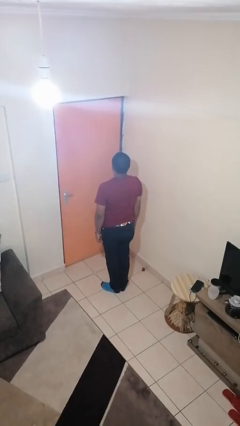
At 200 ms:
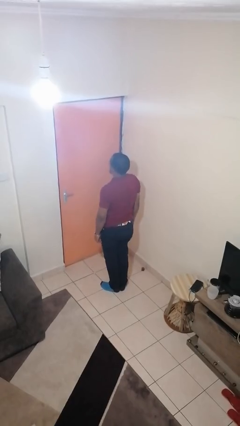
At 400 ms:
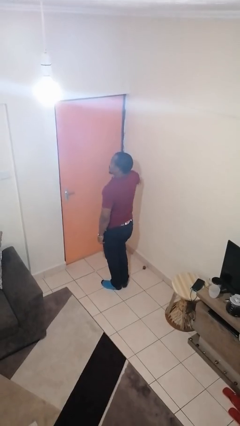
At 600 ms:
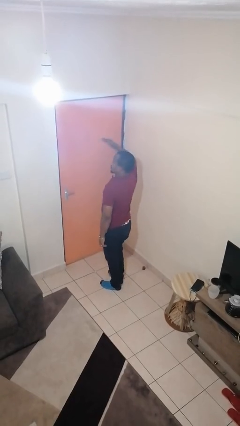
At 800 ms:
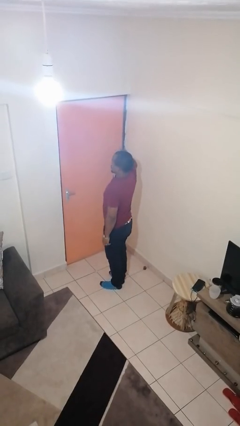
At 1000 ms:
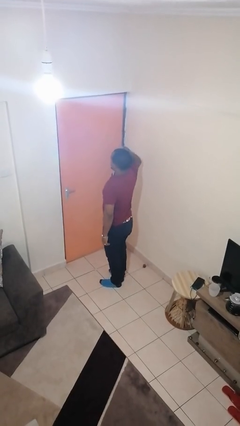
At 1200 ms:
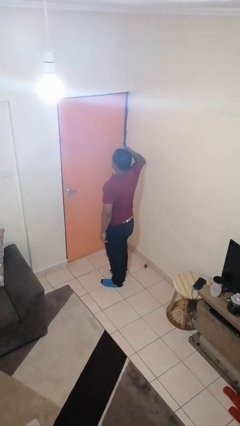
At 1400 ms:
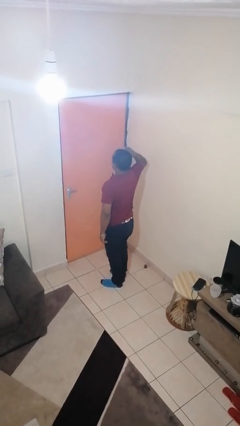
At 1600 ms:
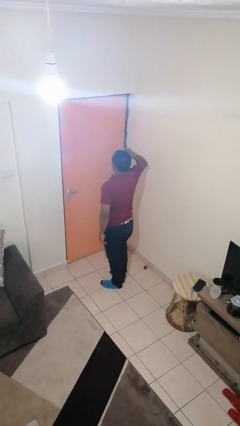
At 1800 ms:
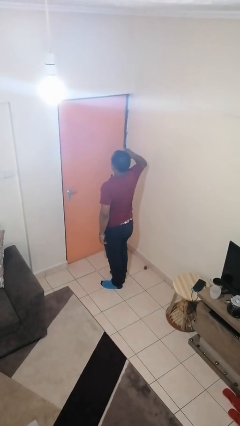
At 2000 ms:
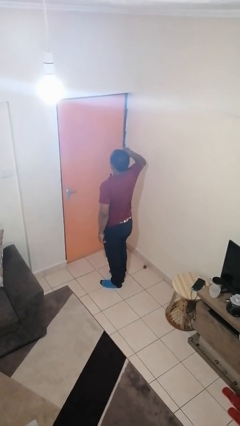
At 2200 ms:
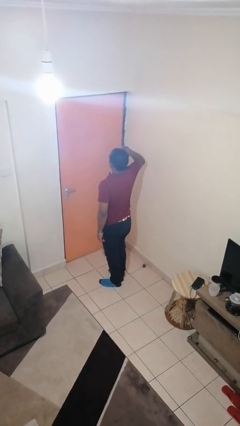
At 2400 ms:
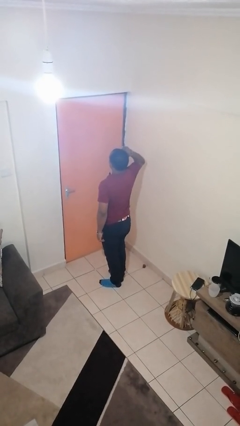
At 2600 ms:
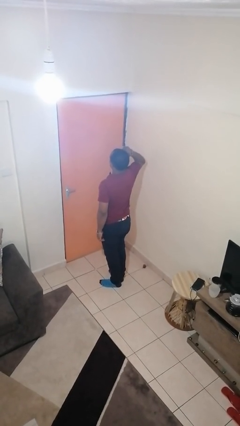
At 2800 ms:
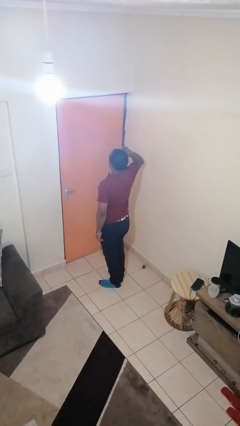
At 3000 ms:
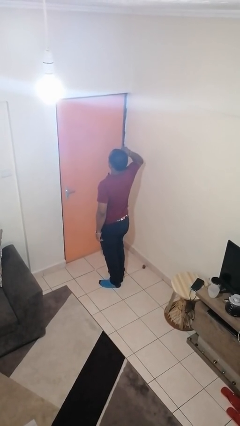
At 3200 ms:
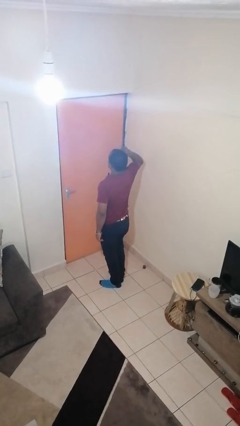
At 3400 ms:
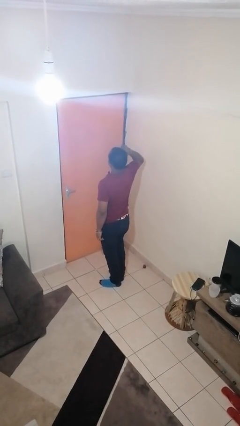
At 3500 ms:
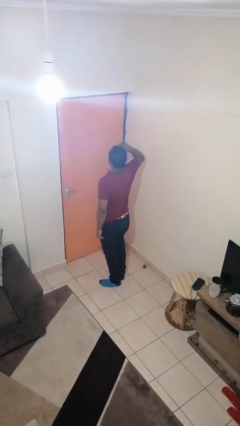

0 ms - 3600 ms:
person salutes

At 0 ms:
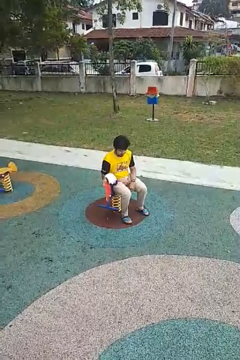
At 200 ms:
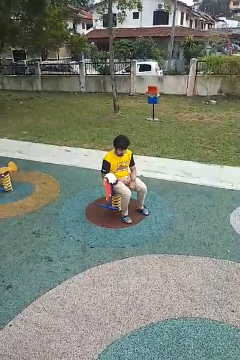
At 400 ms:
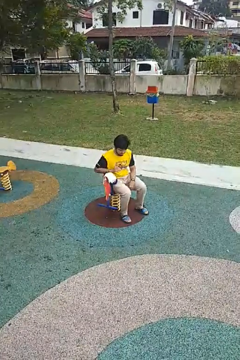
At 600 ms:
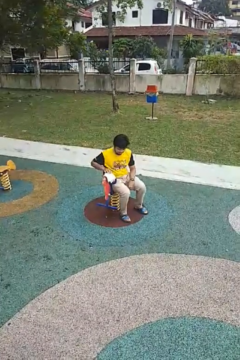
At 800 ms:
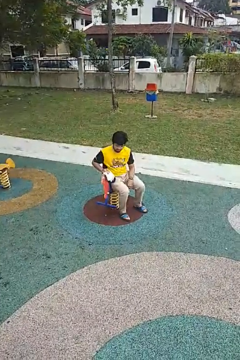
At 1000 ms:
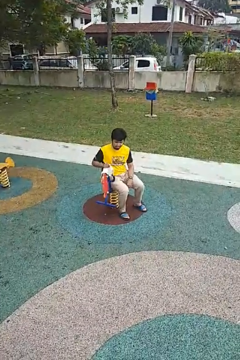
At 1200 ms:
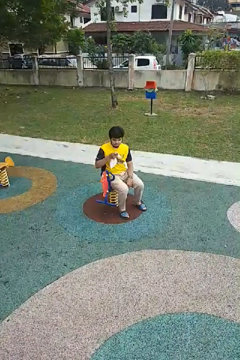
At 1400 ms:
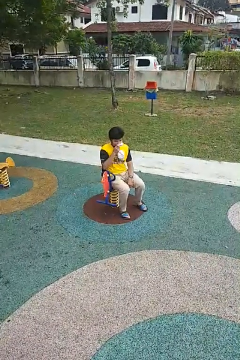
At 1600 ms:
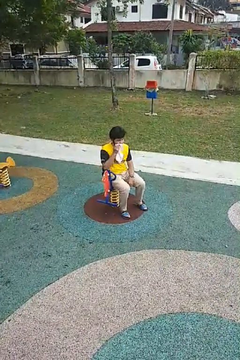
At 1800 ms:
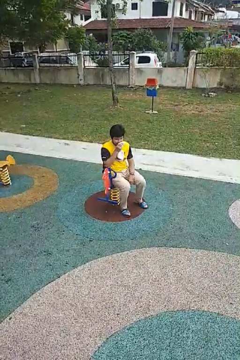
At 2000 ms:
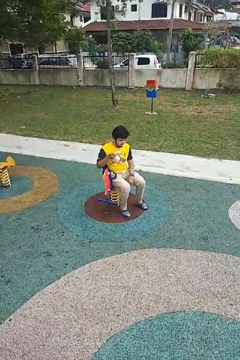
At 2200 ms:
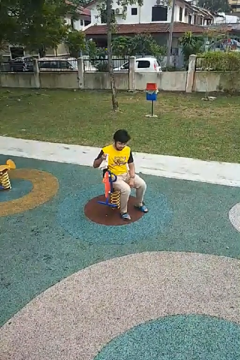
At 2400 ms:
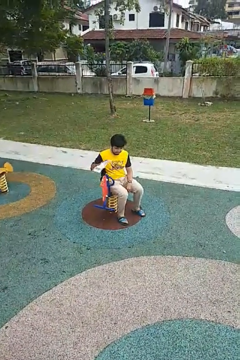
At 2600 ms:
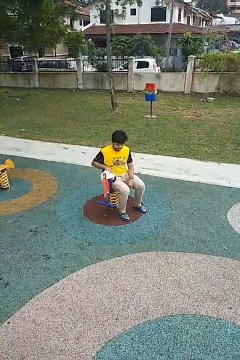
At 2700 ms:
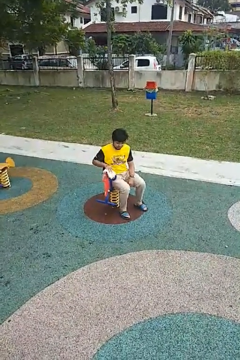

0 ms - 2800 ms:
person wipes mouth with napkin

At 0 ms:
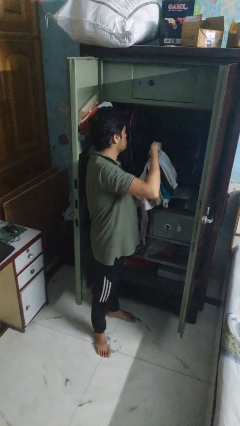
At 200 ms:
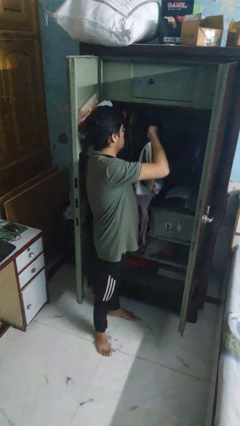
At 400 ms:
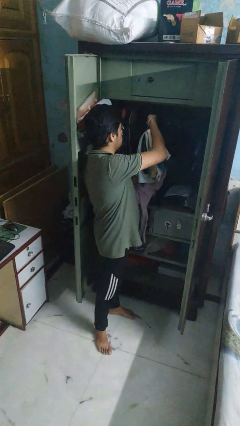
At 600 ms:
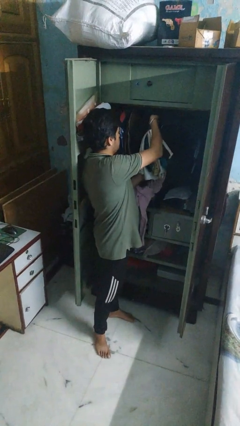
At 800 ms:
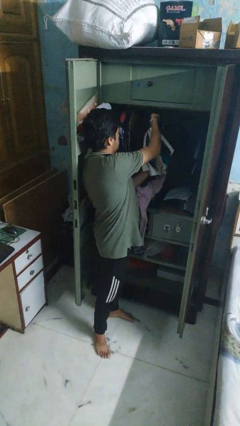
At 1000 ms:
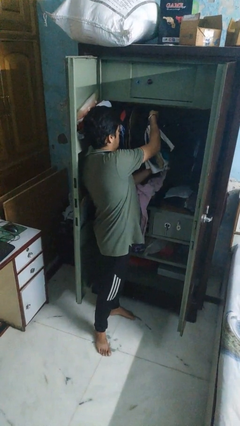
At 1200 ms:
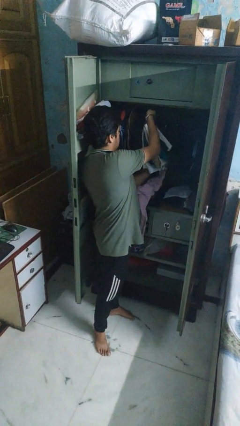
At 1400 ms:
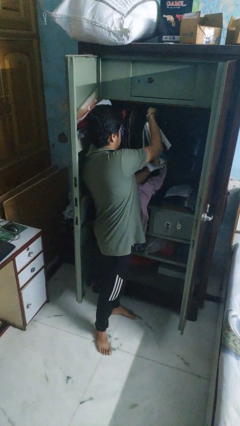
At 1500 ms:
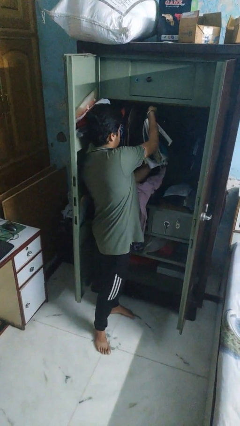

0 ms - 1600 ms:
person puts clothes into closet

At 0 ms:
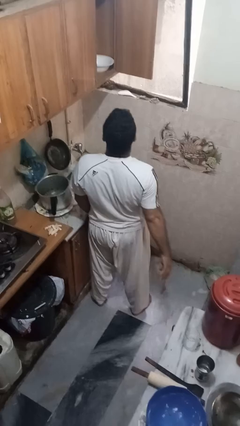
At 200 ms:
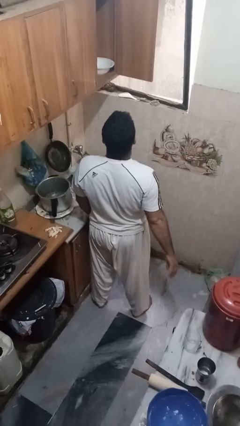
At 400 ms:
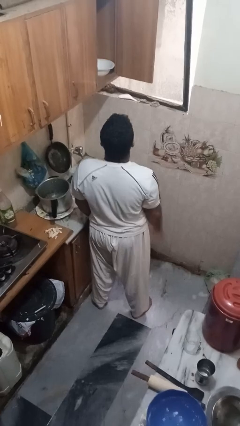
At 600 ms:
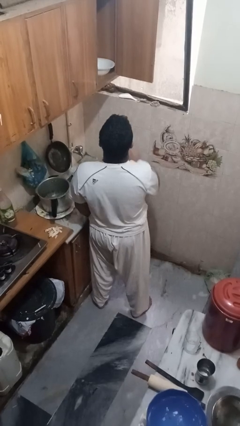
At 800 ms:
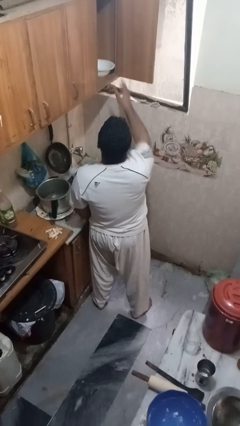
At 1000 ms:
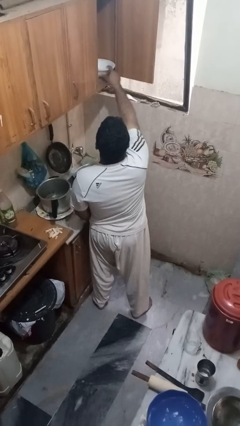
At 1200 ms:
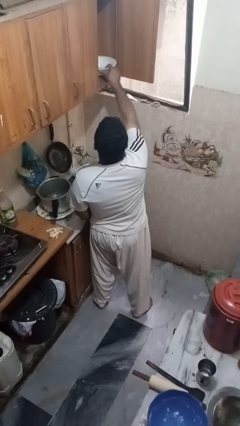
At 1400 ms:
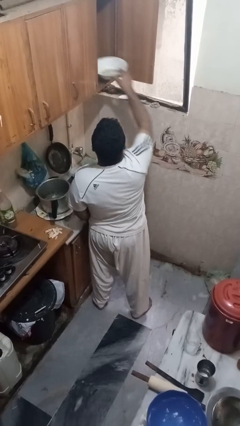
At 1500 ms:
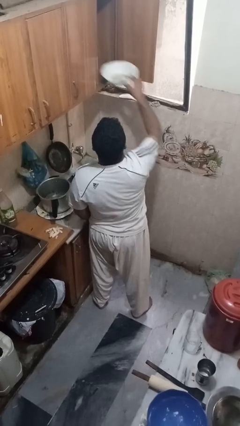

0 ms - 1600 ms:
person takes object from cabinet

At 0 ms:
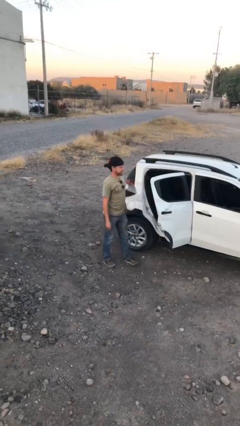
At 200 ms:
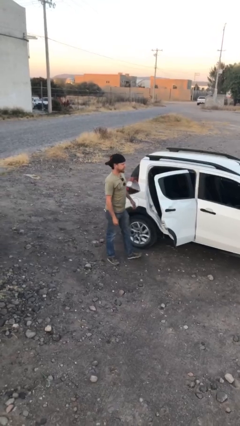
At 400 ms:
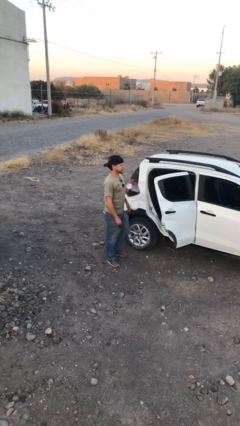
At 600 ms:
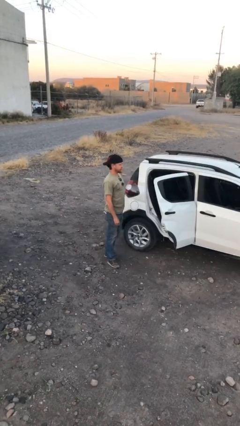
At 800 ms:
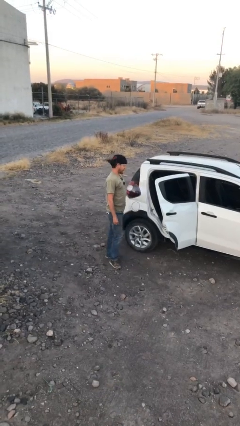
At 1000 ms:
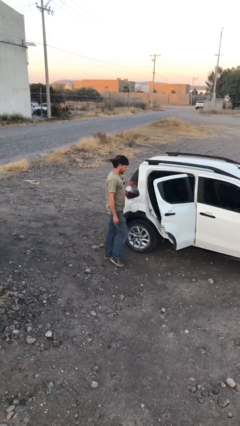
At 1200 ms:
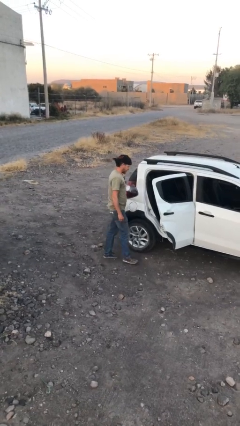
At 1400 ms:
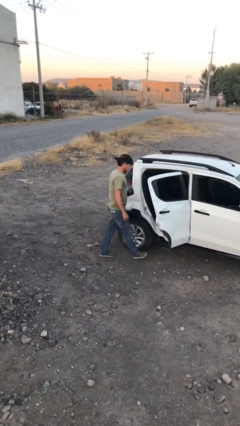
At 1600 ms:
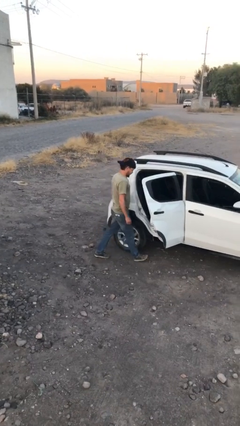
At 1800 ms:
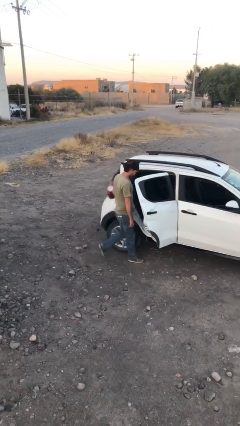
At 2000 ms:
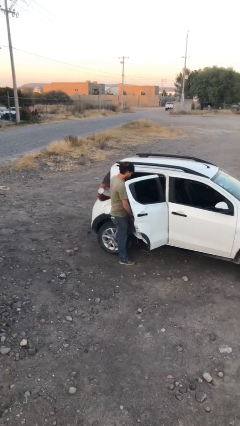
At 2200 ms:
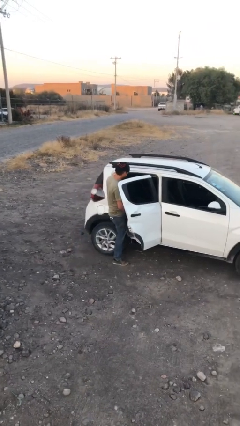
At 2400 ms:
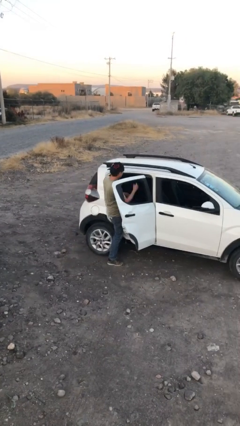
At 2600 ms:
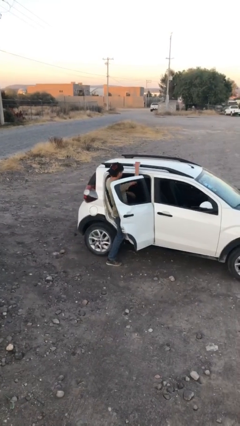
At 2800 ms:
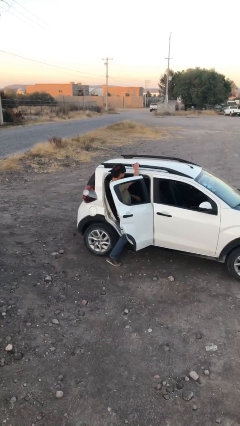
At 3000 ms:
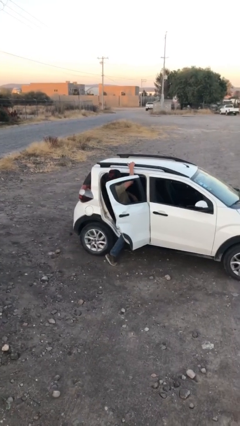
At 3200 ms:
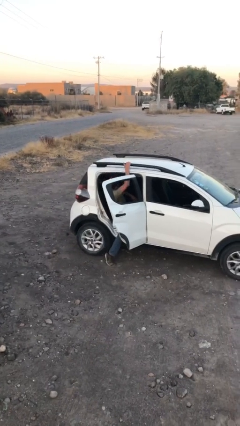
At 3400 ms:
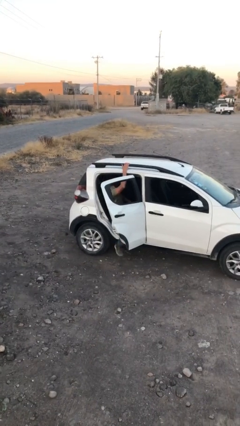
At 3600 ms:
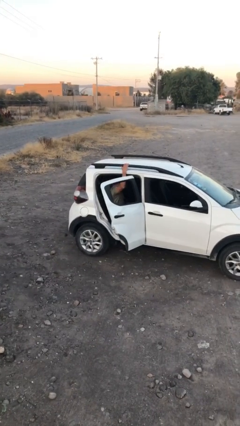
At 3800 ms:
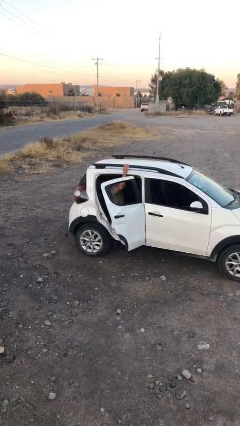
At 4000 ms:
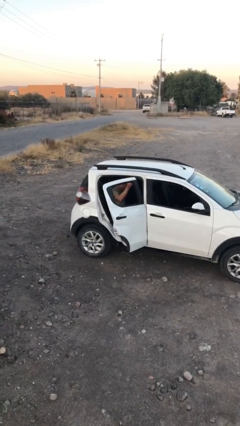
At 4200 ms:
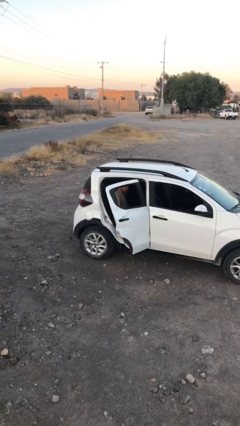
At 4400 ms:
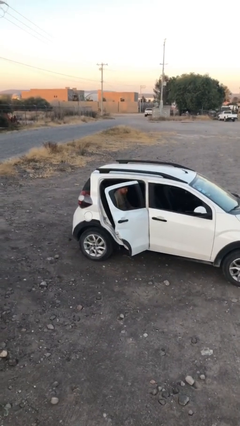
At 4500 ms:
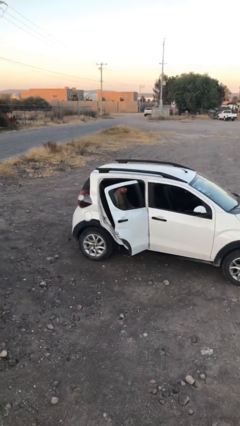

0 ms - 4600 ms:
person enters car

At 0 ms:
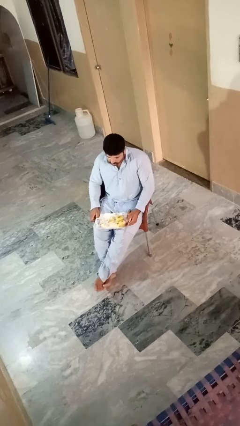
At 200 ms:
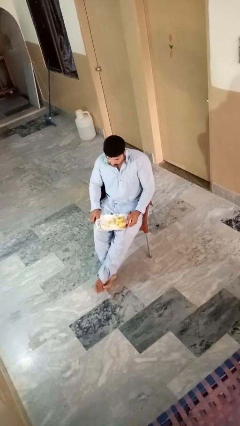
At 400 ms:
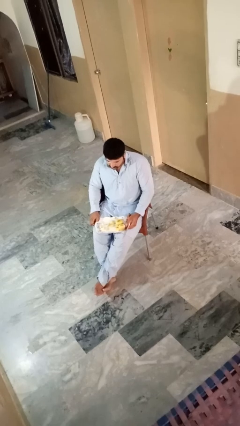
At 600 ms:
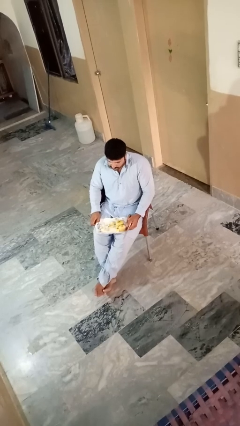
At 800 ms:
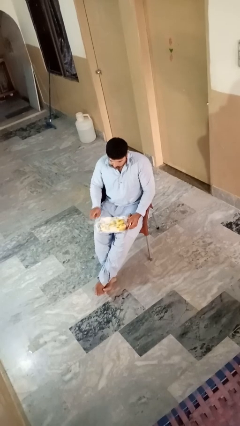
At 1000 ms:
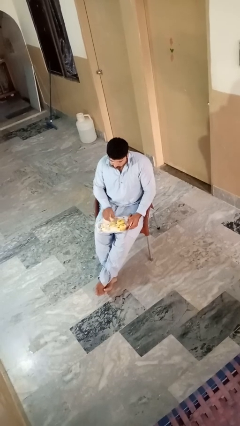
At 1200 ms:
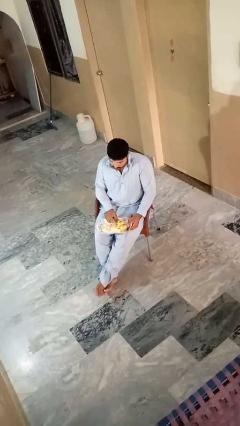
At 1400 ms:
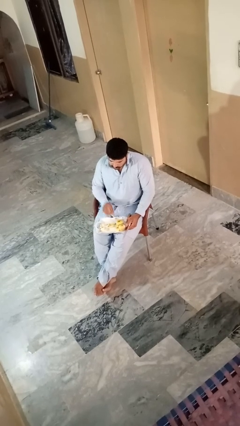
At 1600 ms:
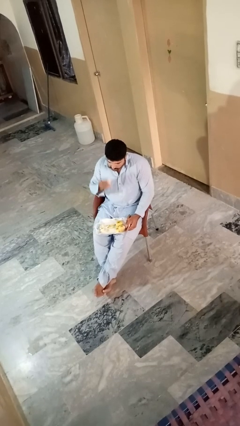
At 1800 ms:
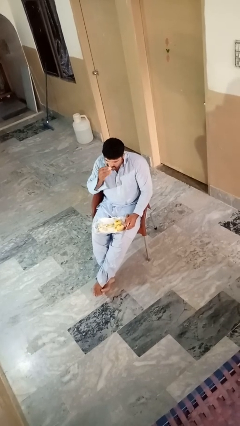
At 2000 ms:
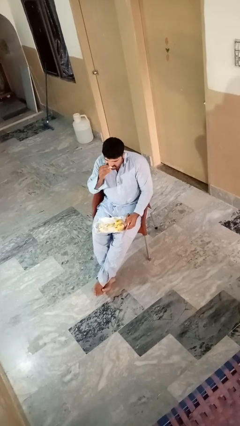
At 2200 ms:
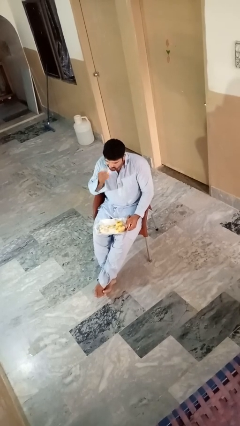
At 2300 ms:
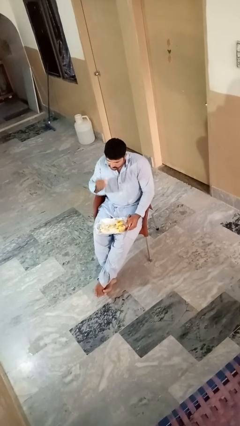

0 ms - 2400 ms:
person eats apple

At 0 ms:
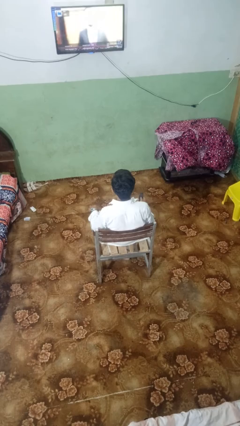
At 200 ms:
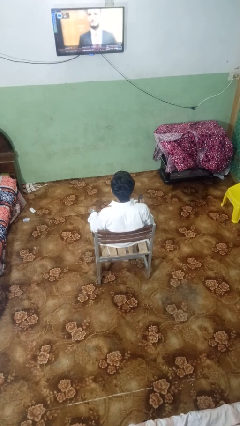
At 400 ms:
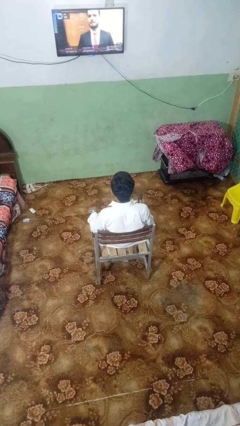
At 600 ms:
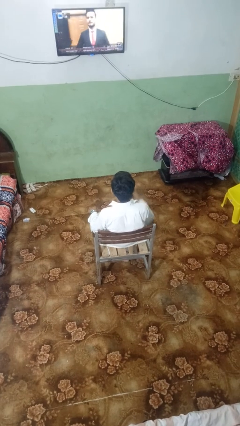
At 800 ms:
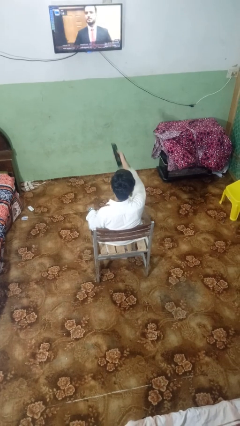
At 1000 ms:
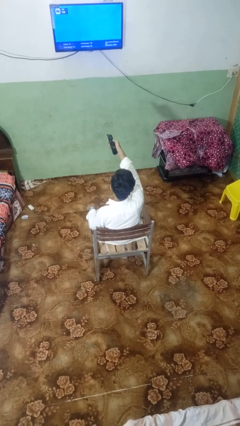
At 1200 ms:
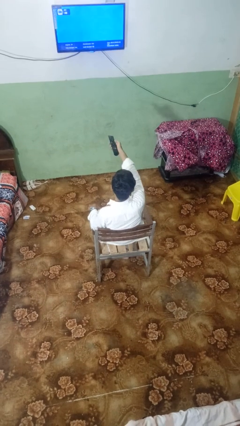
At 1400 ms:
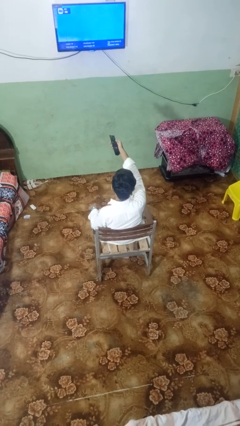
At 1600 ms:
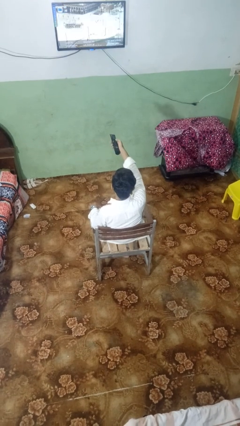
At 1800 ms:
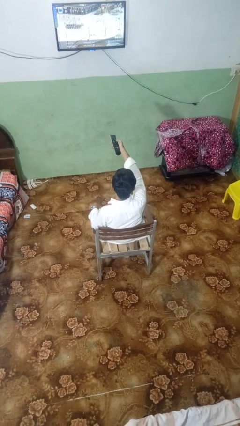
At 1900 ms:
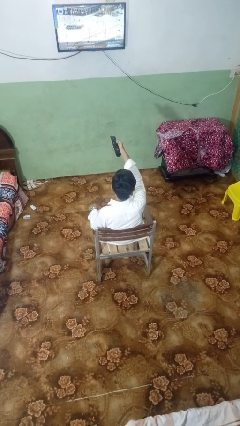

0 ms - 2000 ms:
person uses television remote
